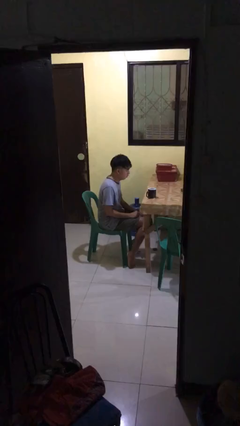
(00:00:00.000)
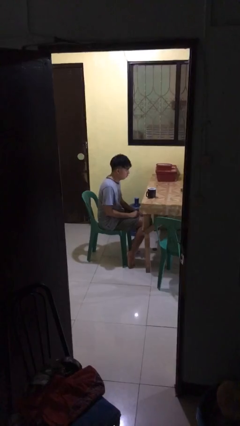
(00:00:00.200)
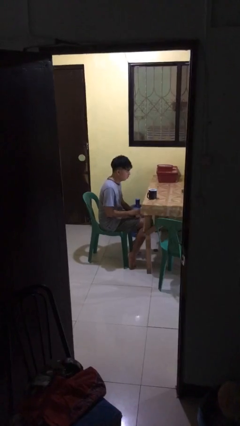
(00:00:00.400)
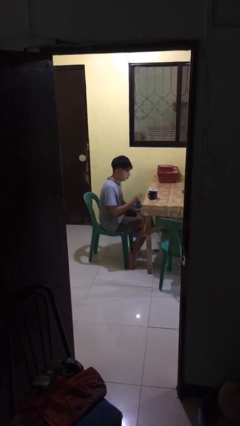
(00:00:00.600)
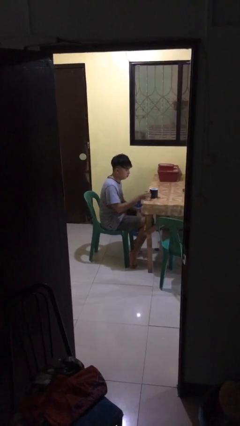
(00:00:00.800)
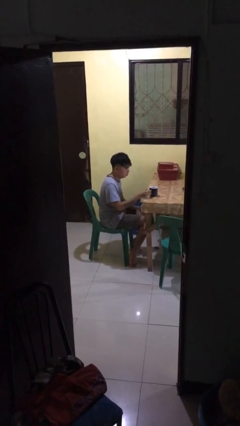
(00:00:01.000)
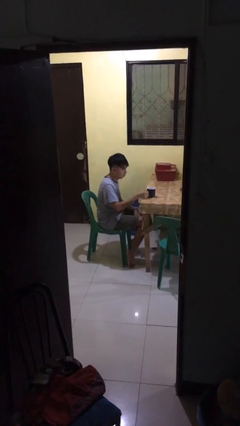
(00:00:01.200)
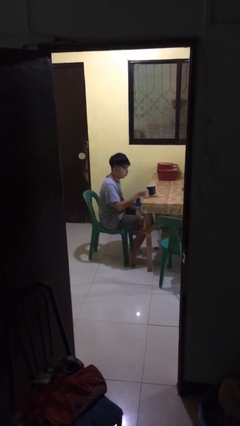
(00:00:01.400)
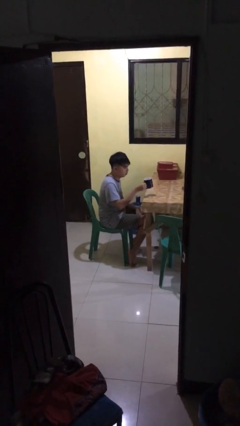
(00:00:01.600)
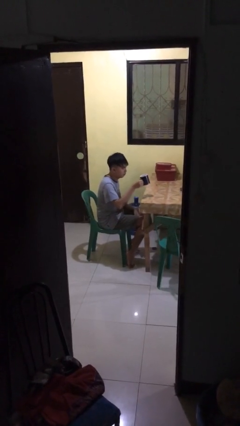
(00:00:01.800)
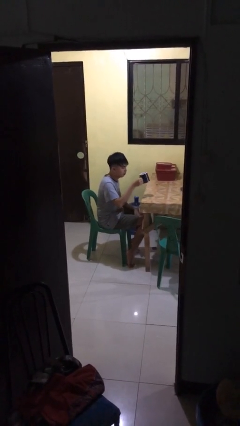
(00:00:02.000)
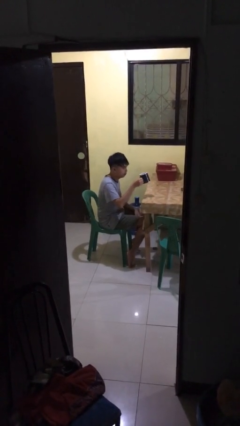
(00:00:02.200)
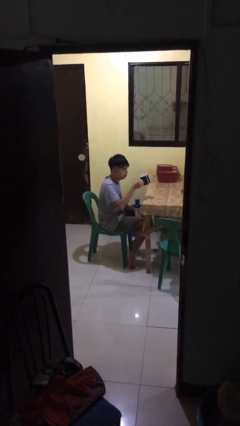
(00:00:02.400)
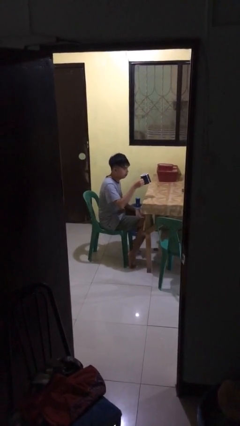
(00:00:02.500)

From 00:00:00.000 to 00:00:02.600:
person picks up object from table

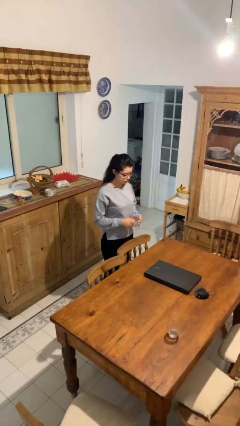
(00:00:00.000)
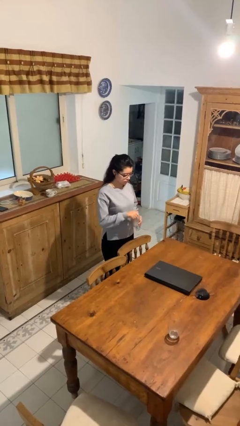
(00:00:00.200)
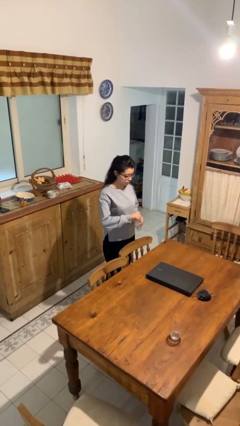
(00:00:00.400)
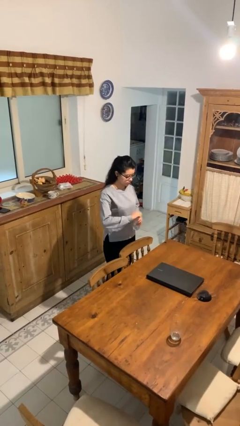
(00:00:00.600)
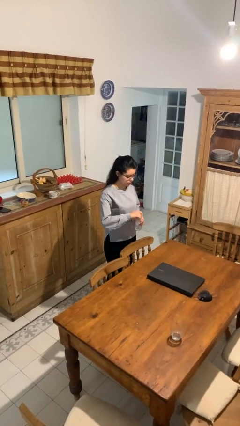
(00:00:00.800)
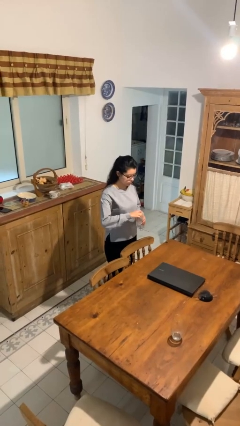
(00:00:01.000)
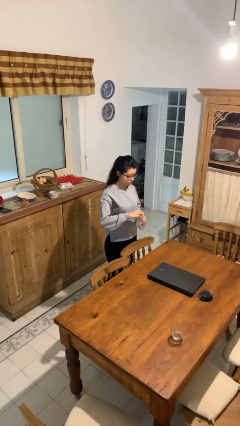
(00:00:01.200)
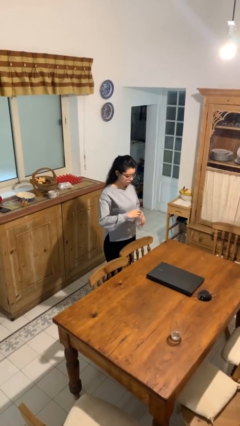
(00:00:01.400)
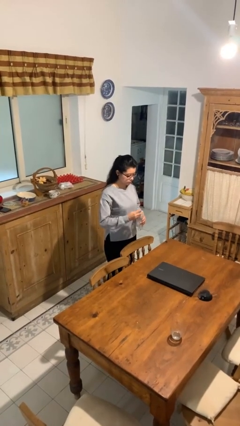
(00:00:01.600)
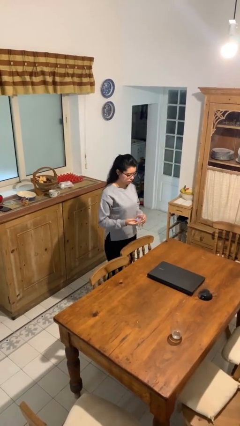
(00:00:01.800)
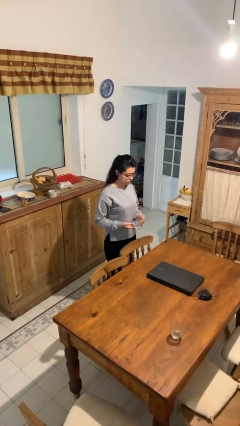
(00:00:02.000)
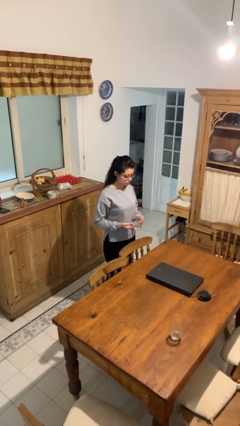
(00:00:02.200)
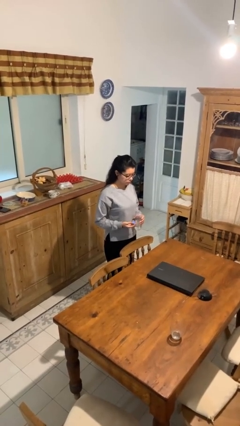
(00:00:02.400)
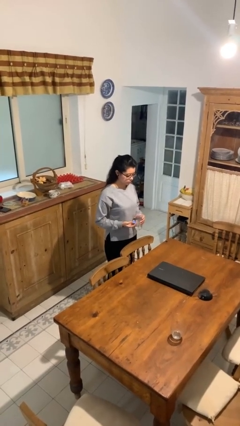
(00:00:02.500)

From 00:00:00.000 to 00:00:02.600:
person unscrews lid from bottle

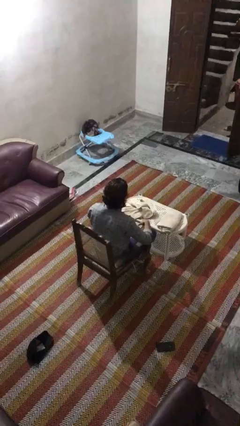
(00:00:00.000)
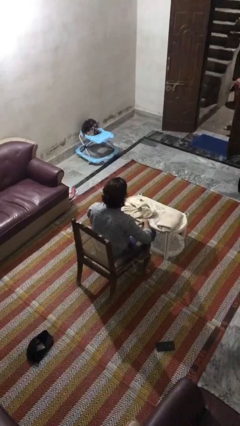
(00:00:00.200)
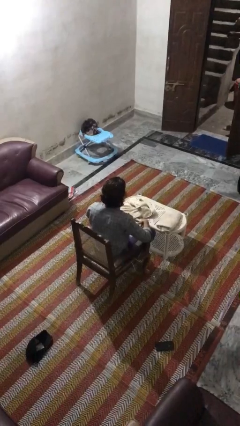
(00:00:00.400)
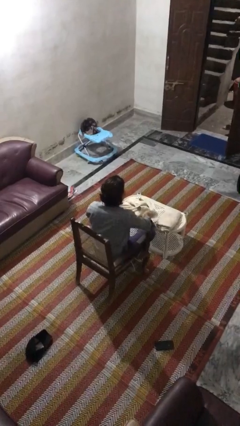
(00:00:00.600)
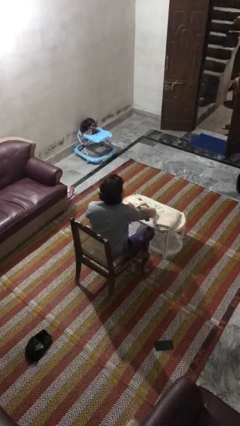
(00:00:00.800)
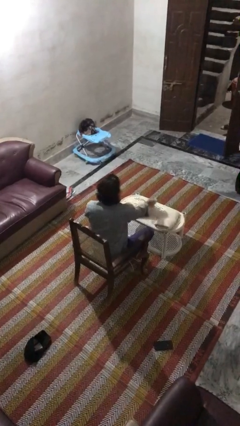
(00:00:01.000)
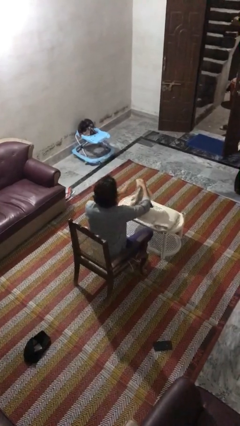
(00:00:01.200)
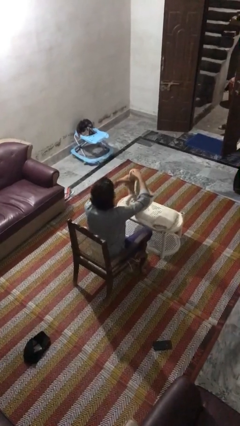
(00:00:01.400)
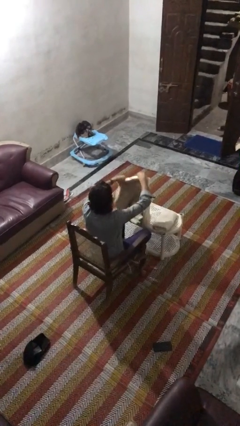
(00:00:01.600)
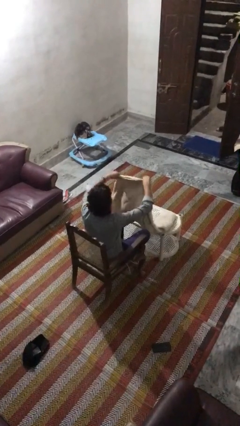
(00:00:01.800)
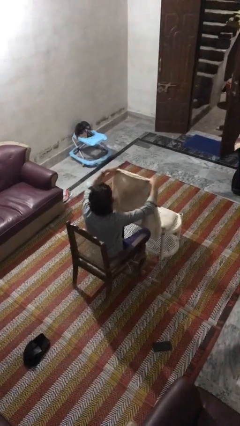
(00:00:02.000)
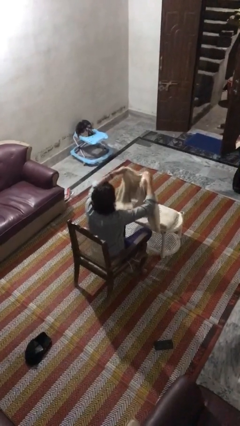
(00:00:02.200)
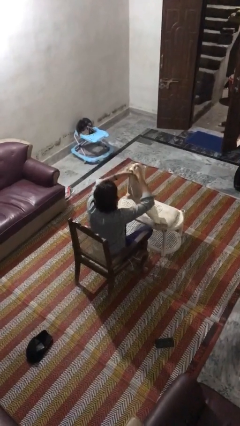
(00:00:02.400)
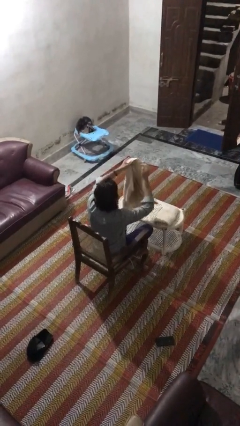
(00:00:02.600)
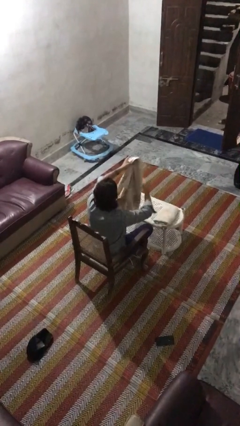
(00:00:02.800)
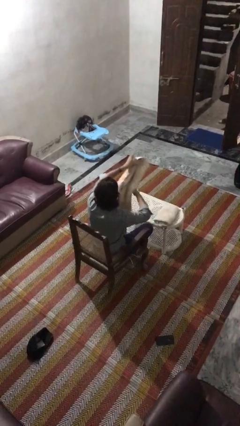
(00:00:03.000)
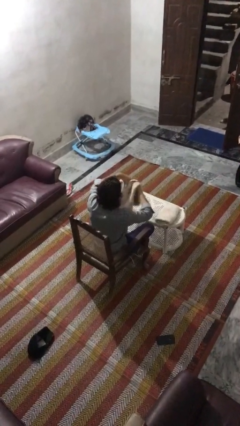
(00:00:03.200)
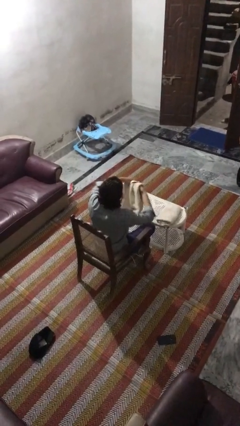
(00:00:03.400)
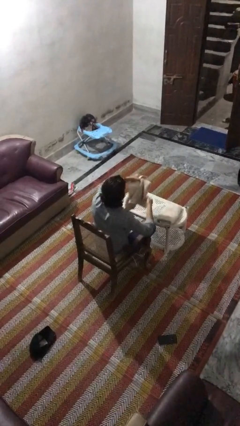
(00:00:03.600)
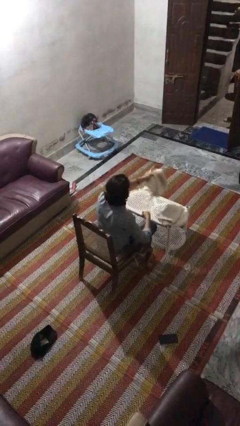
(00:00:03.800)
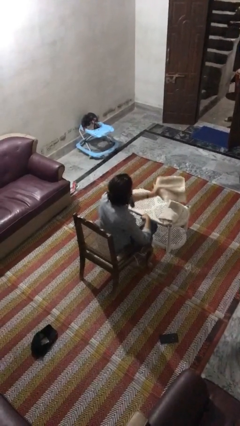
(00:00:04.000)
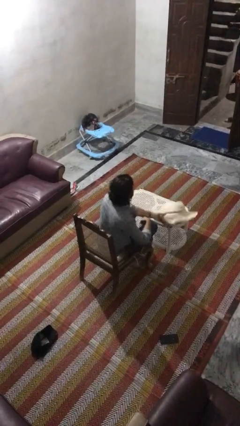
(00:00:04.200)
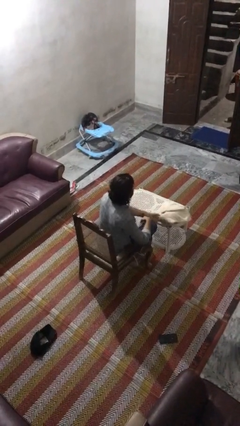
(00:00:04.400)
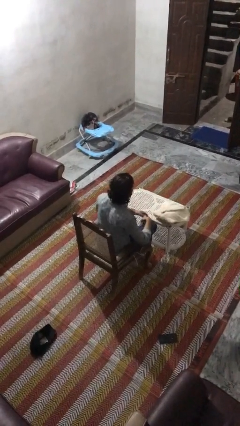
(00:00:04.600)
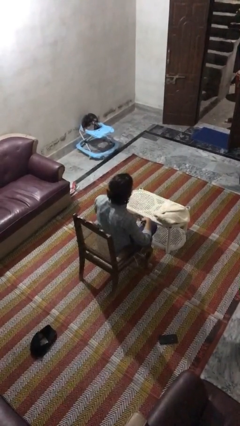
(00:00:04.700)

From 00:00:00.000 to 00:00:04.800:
person folds towel

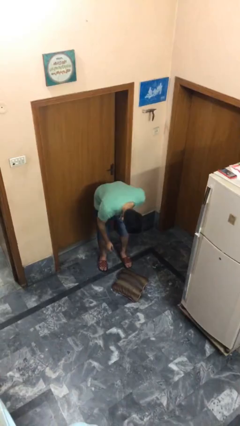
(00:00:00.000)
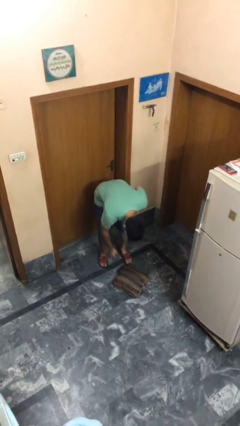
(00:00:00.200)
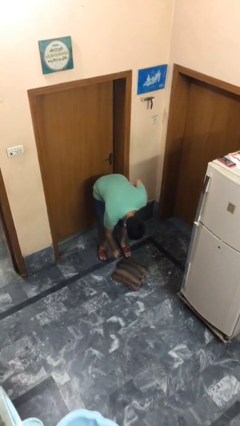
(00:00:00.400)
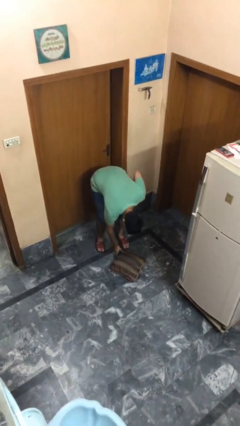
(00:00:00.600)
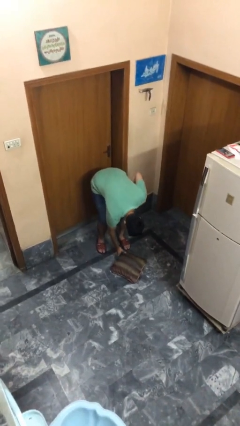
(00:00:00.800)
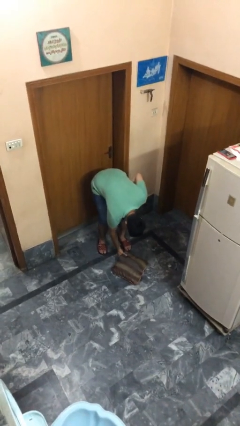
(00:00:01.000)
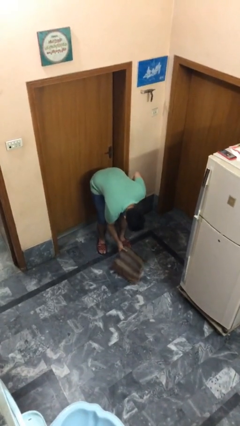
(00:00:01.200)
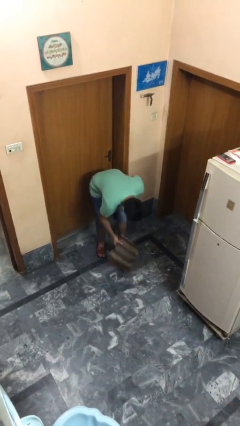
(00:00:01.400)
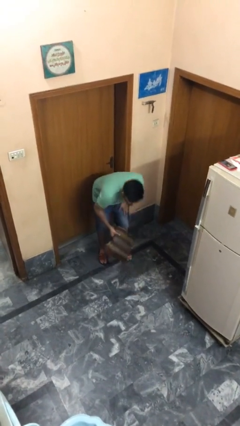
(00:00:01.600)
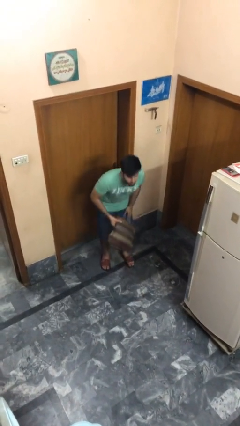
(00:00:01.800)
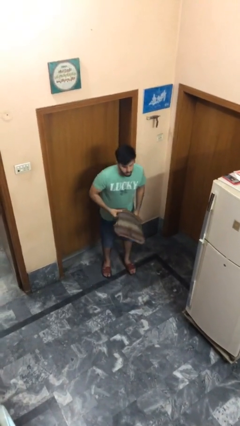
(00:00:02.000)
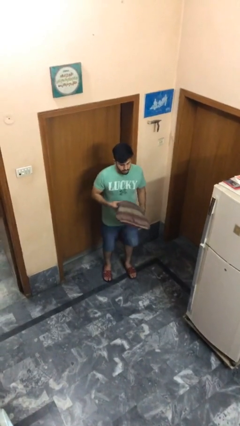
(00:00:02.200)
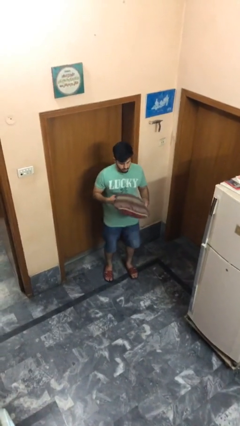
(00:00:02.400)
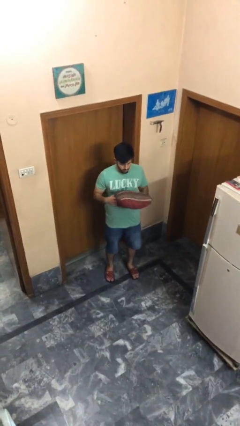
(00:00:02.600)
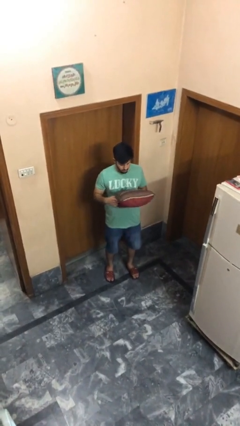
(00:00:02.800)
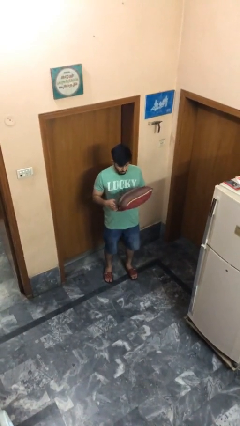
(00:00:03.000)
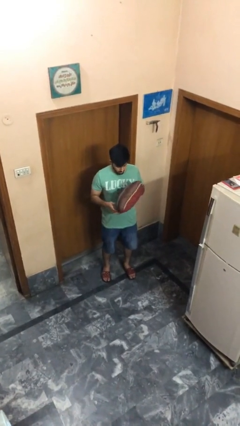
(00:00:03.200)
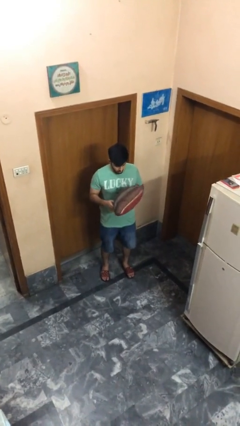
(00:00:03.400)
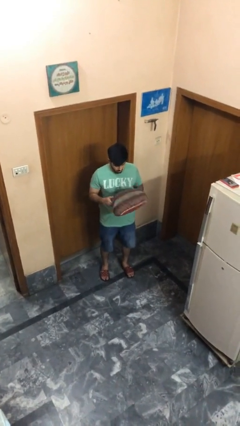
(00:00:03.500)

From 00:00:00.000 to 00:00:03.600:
person picks up object from floor

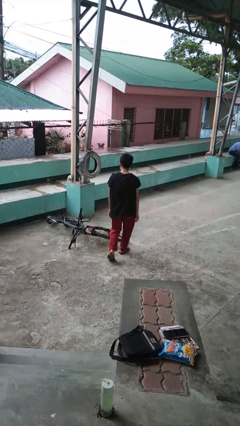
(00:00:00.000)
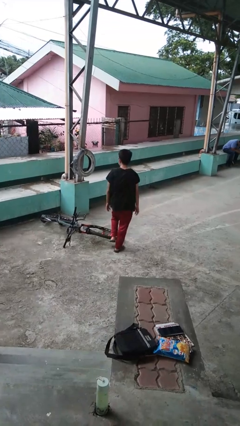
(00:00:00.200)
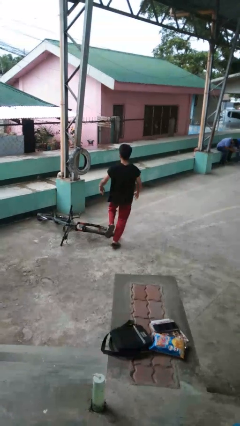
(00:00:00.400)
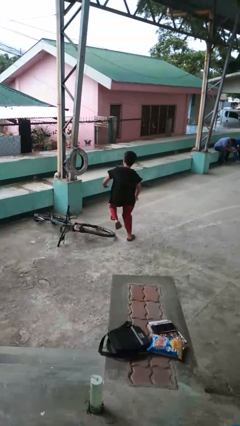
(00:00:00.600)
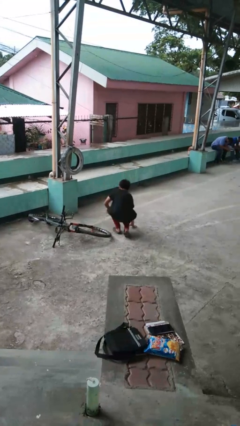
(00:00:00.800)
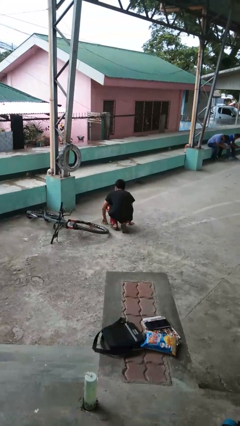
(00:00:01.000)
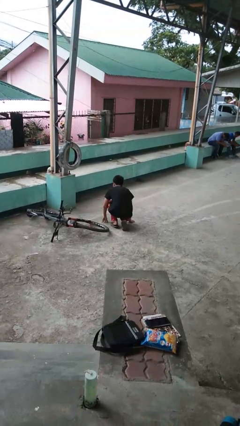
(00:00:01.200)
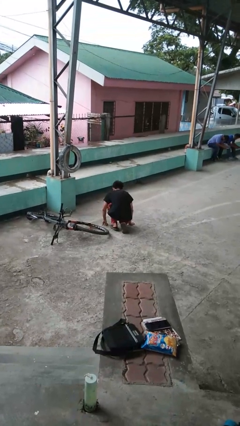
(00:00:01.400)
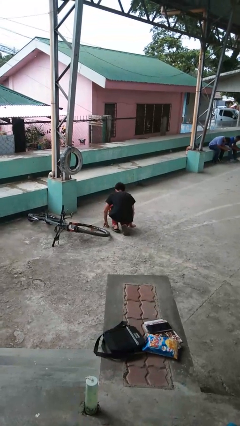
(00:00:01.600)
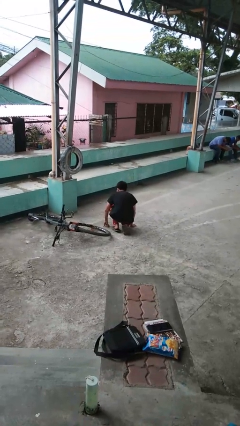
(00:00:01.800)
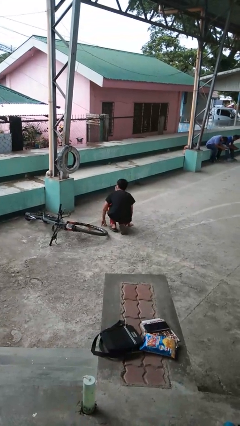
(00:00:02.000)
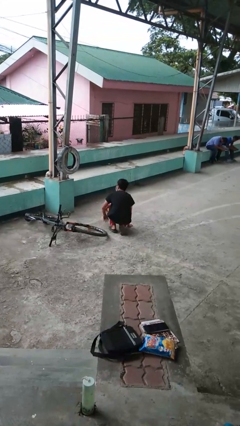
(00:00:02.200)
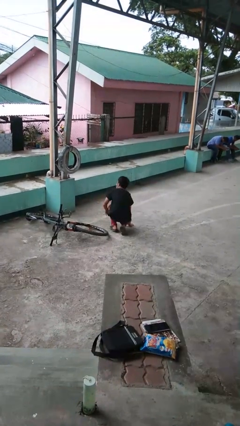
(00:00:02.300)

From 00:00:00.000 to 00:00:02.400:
person trips on object on floor

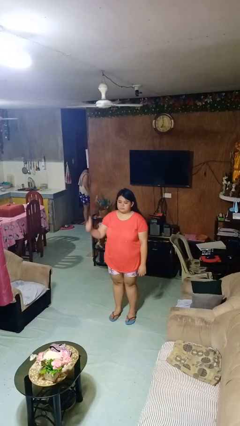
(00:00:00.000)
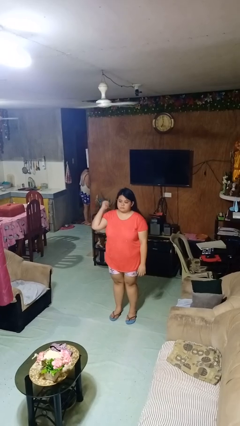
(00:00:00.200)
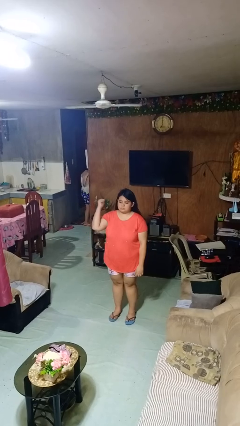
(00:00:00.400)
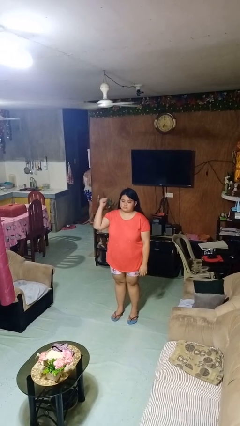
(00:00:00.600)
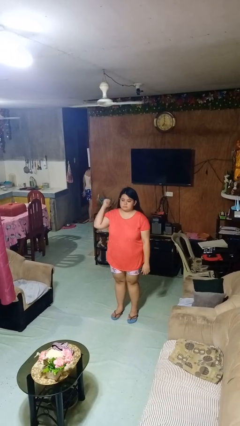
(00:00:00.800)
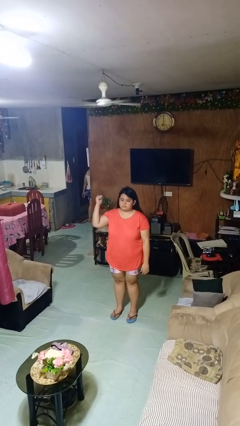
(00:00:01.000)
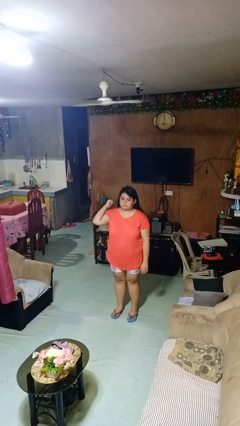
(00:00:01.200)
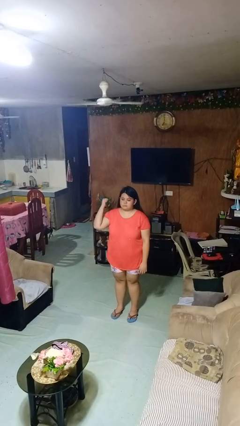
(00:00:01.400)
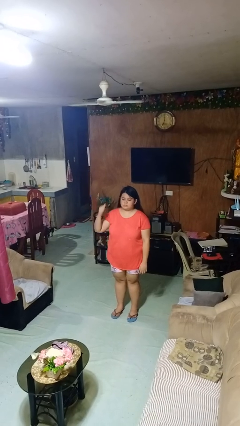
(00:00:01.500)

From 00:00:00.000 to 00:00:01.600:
person gestures behind me
